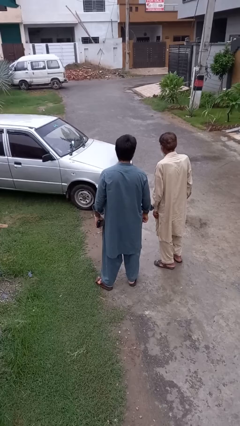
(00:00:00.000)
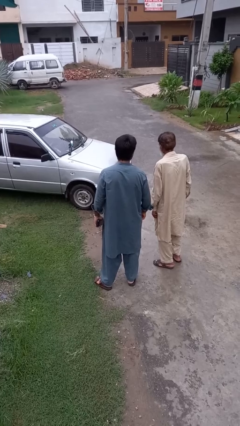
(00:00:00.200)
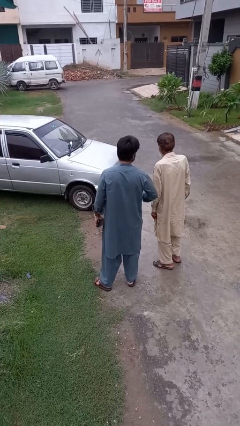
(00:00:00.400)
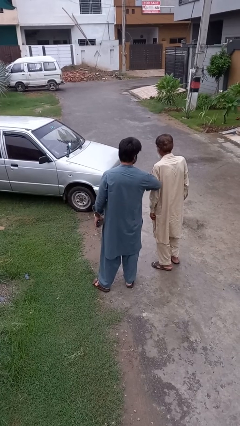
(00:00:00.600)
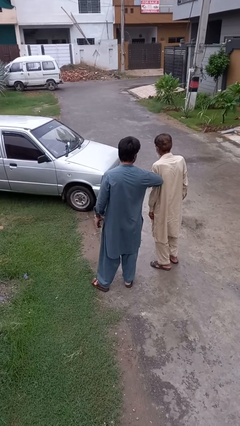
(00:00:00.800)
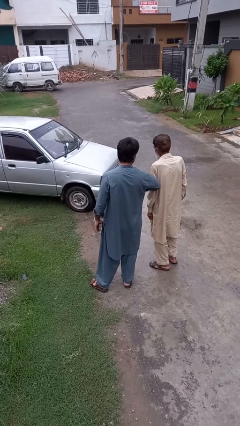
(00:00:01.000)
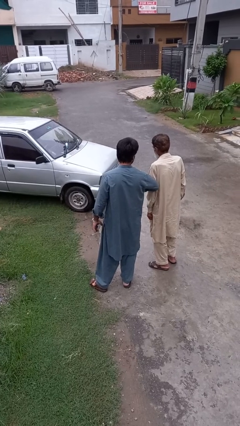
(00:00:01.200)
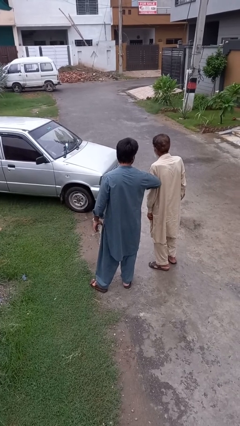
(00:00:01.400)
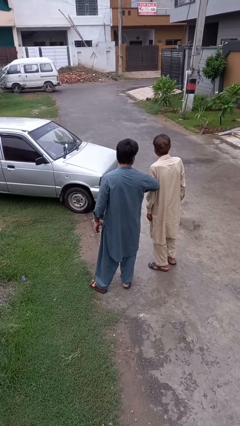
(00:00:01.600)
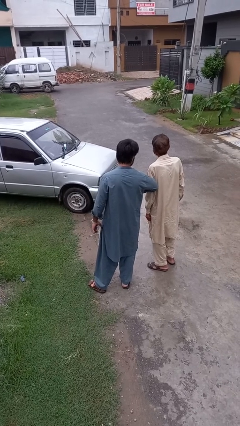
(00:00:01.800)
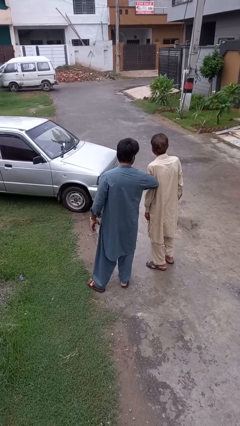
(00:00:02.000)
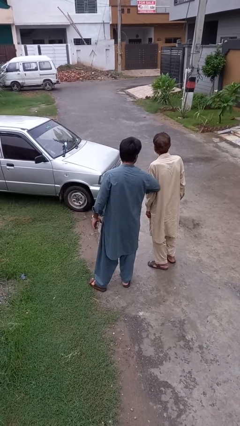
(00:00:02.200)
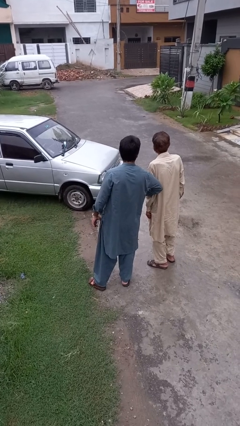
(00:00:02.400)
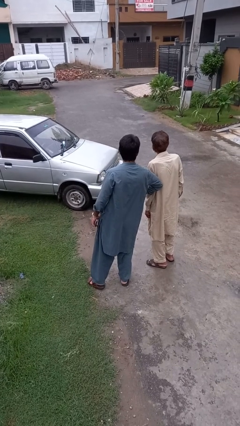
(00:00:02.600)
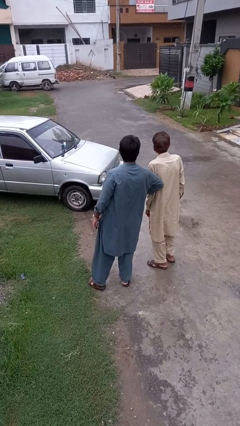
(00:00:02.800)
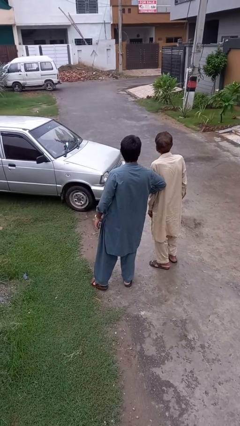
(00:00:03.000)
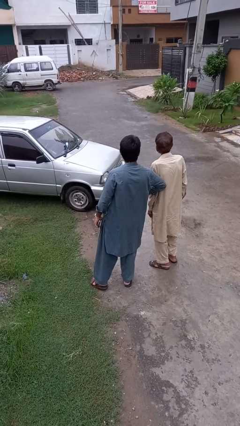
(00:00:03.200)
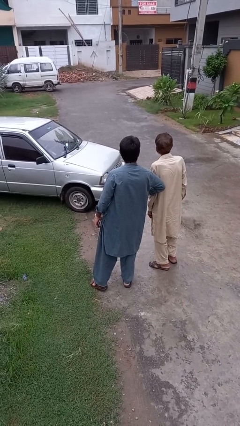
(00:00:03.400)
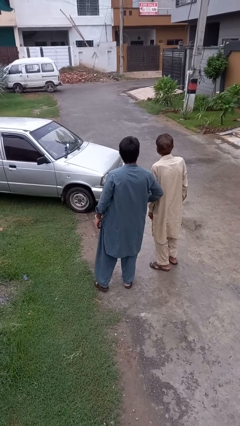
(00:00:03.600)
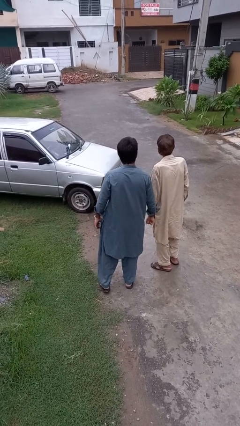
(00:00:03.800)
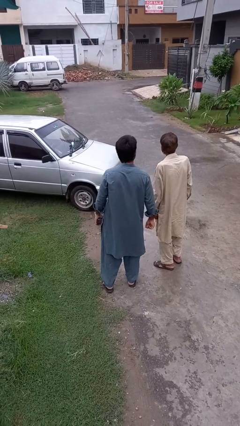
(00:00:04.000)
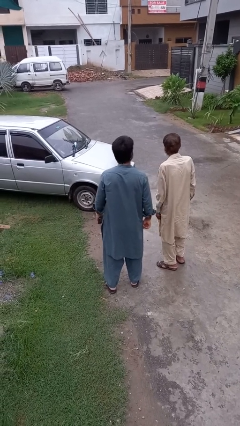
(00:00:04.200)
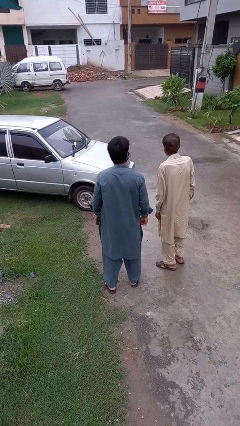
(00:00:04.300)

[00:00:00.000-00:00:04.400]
person nudges person with elbow

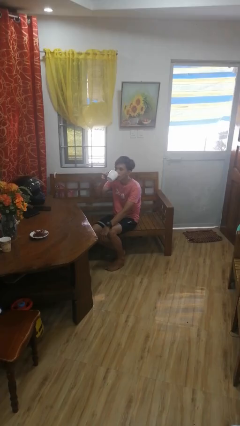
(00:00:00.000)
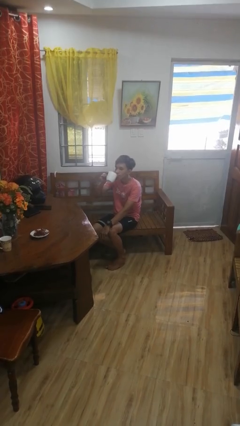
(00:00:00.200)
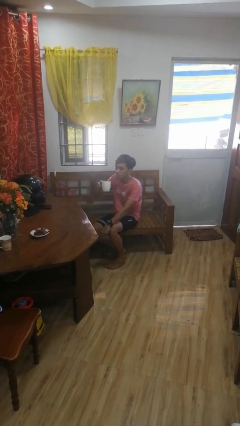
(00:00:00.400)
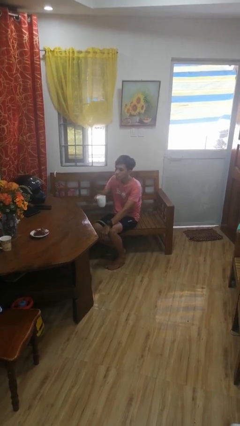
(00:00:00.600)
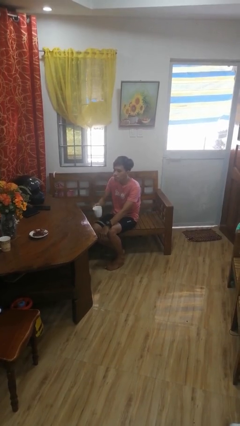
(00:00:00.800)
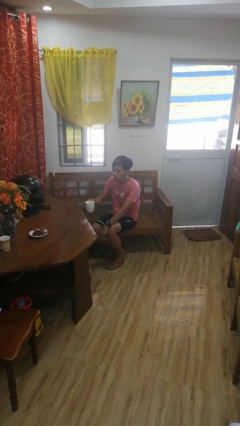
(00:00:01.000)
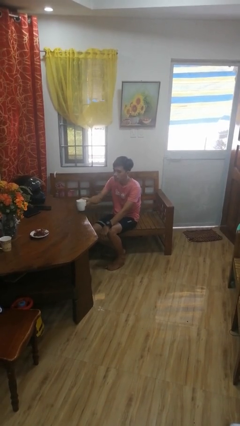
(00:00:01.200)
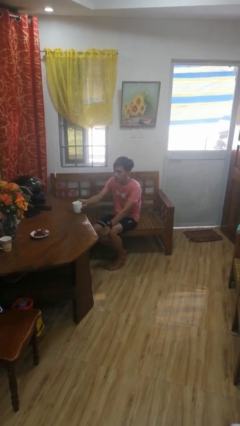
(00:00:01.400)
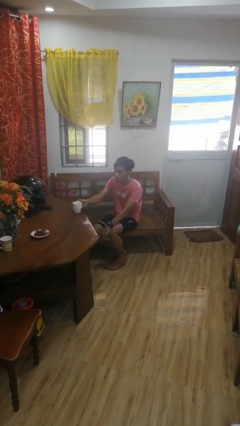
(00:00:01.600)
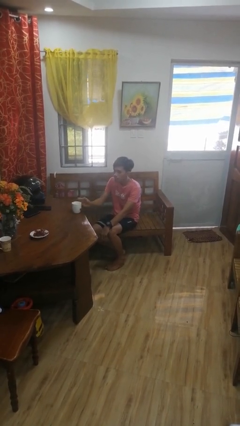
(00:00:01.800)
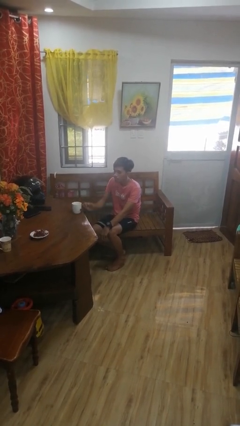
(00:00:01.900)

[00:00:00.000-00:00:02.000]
person puts down object on table

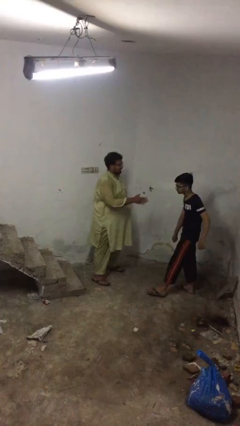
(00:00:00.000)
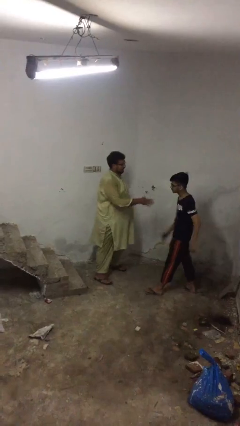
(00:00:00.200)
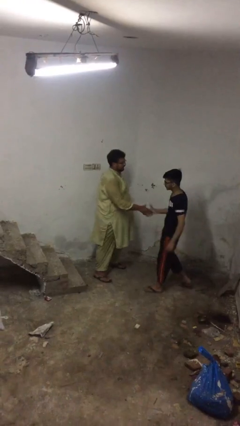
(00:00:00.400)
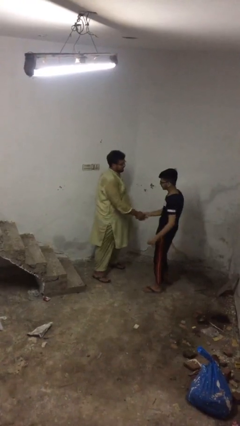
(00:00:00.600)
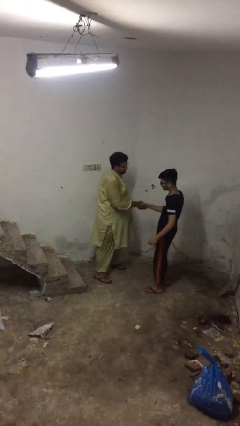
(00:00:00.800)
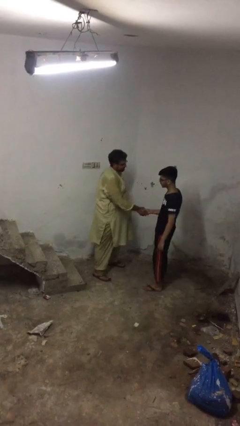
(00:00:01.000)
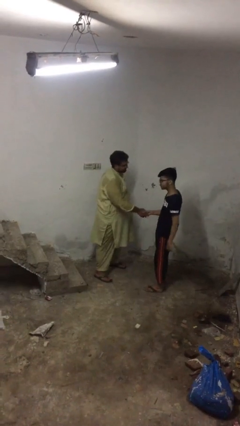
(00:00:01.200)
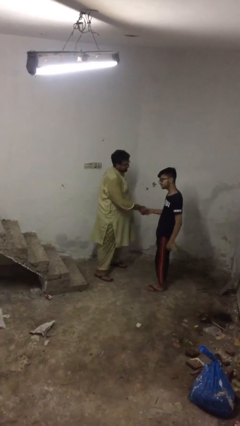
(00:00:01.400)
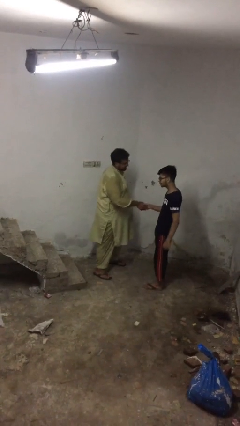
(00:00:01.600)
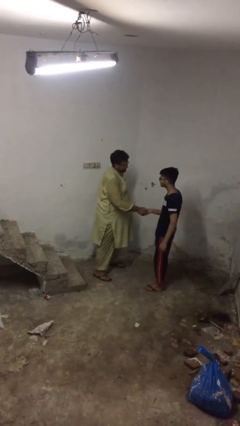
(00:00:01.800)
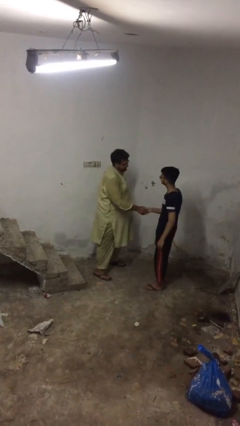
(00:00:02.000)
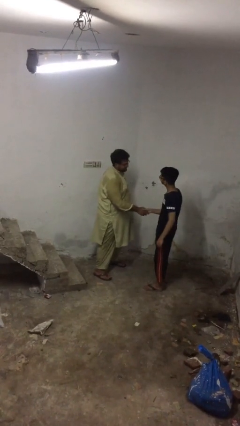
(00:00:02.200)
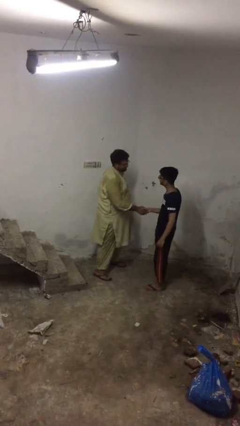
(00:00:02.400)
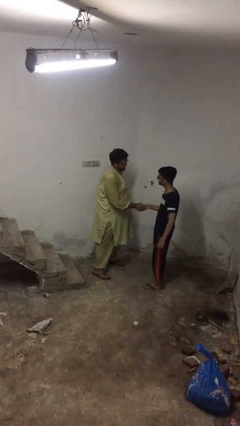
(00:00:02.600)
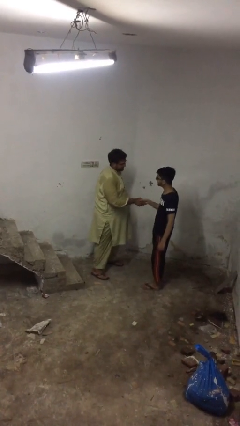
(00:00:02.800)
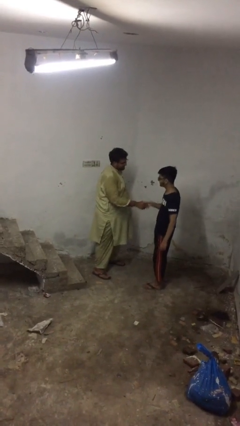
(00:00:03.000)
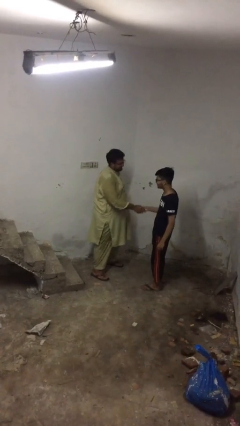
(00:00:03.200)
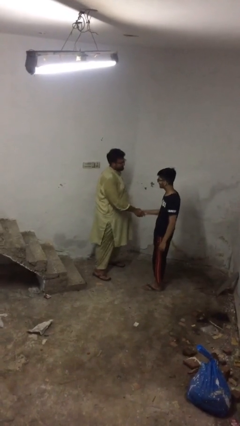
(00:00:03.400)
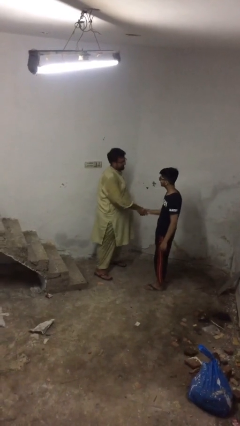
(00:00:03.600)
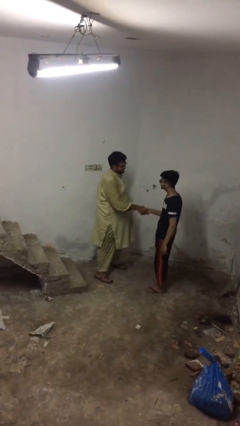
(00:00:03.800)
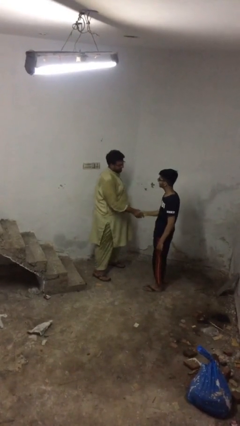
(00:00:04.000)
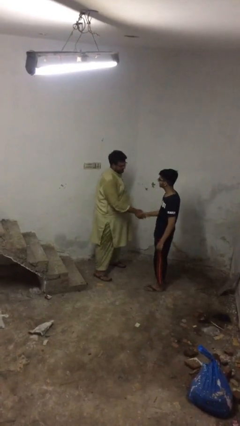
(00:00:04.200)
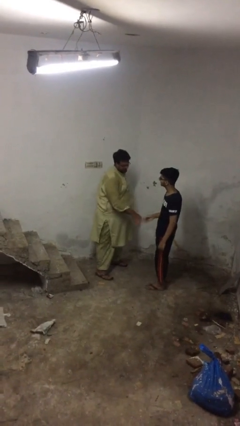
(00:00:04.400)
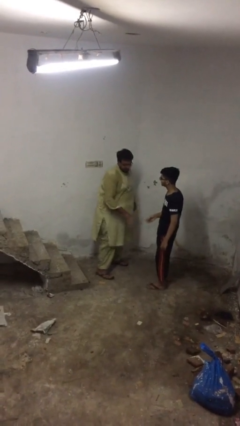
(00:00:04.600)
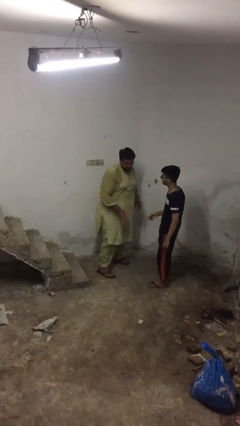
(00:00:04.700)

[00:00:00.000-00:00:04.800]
person shakes hand

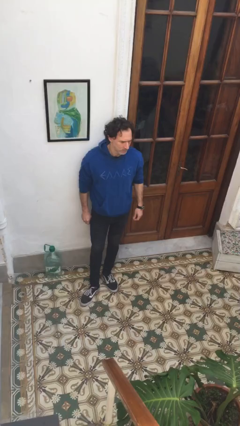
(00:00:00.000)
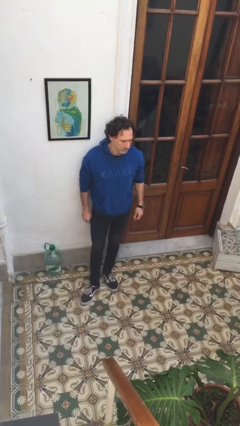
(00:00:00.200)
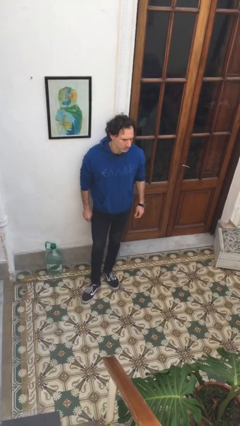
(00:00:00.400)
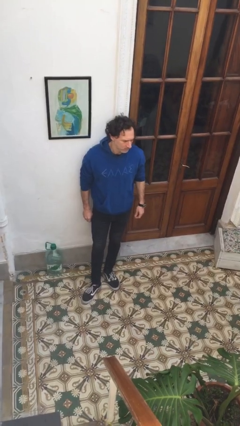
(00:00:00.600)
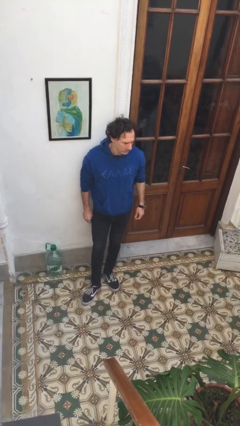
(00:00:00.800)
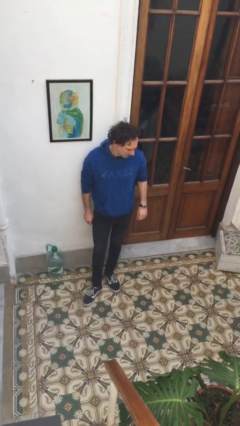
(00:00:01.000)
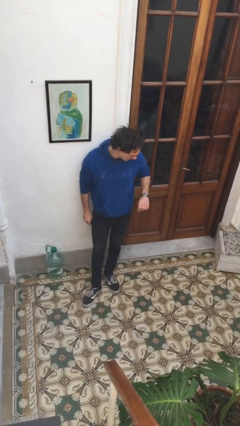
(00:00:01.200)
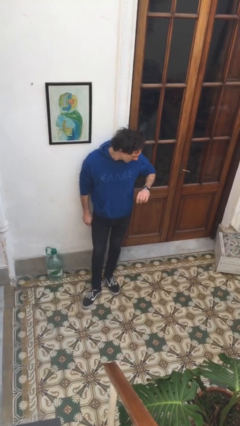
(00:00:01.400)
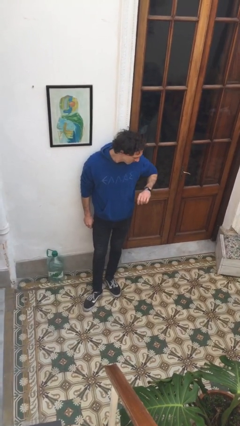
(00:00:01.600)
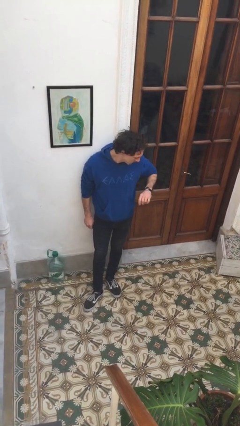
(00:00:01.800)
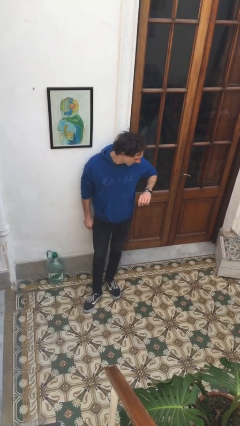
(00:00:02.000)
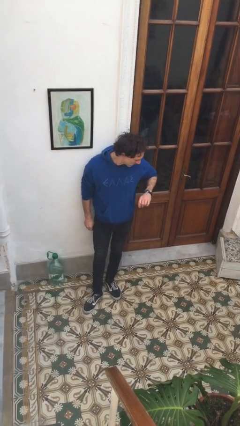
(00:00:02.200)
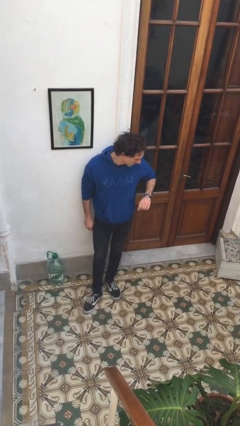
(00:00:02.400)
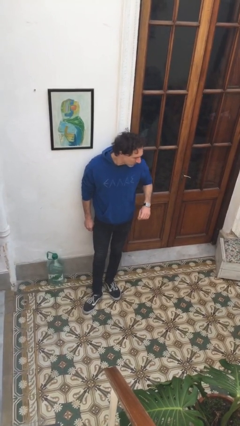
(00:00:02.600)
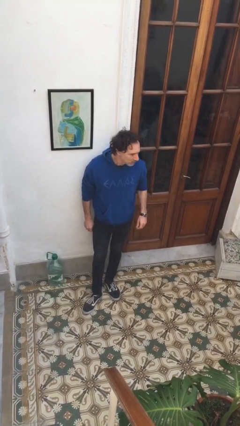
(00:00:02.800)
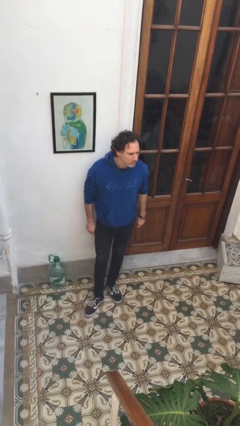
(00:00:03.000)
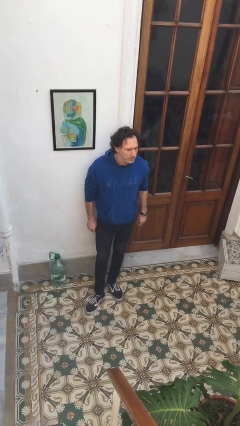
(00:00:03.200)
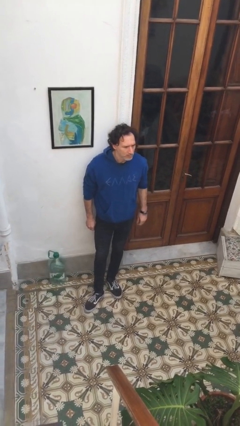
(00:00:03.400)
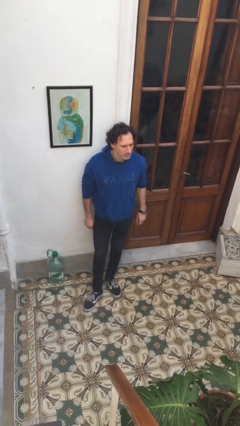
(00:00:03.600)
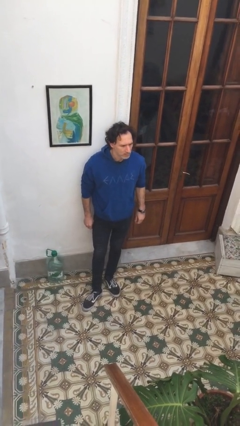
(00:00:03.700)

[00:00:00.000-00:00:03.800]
person looks at wristwatch

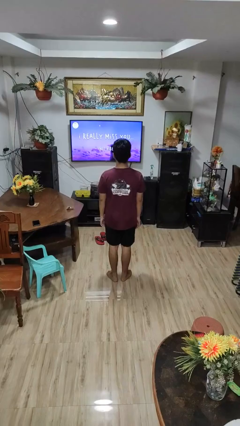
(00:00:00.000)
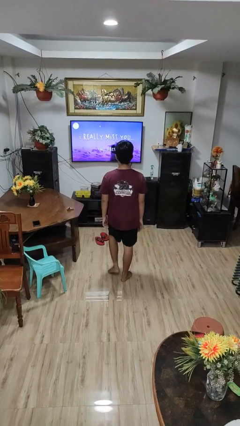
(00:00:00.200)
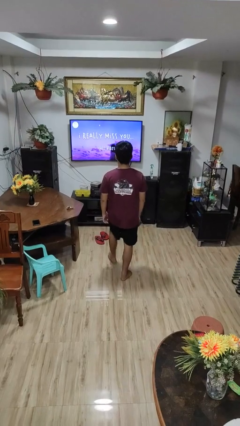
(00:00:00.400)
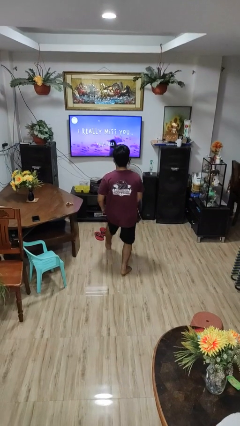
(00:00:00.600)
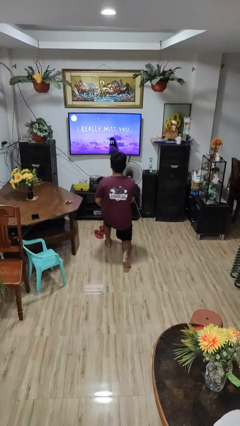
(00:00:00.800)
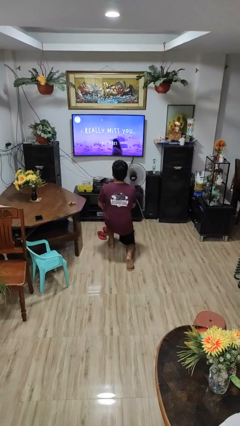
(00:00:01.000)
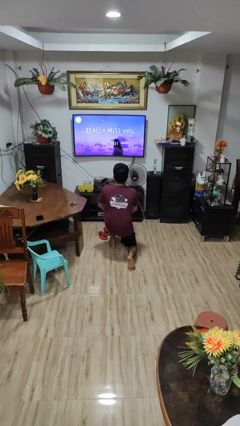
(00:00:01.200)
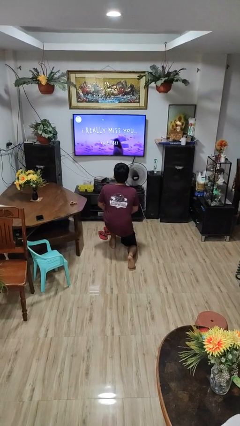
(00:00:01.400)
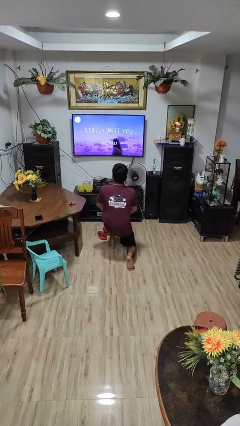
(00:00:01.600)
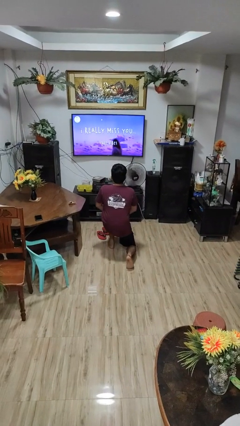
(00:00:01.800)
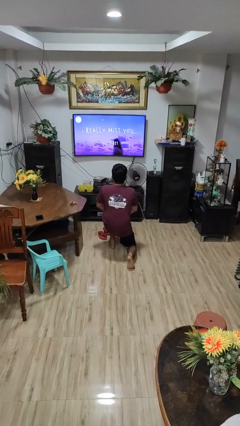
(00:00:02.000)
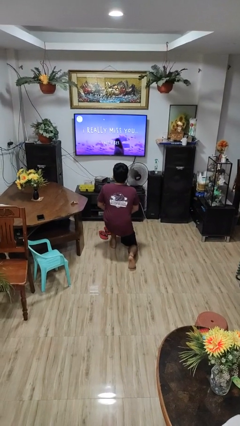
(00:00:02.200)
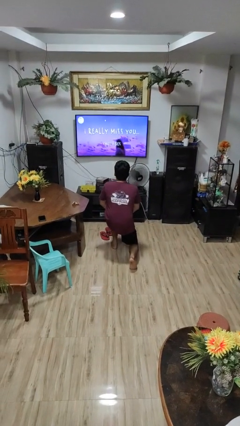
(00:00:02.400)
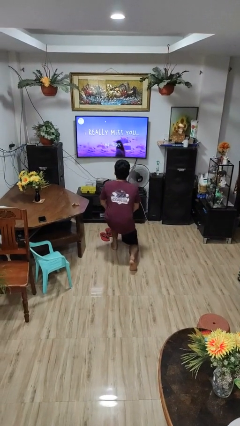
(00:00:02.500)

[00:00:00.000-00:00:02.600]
person exercises with lunges
